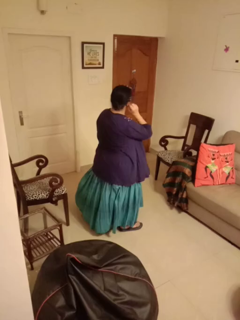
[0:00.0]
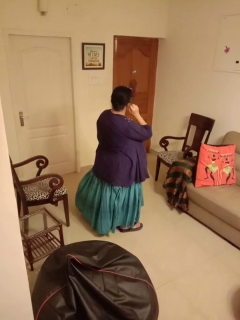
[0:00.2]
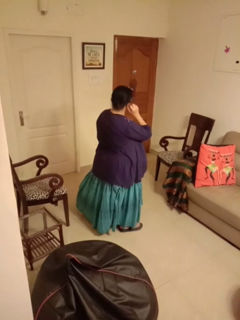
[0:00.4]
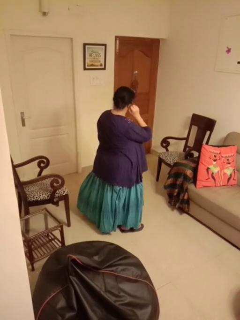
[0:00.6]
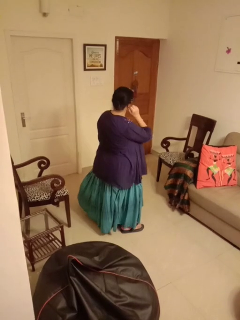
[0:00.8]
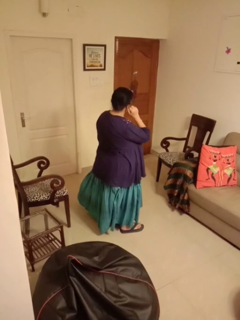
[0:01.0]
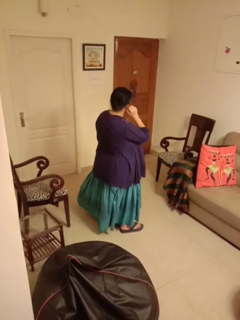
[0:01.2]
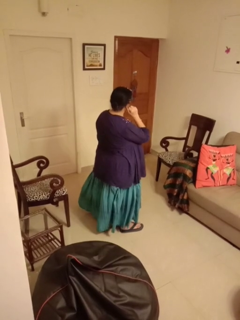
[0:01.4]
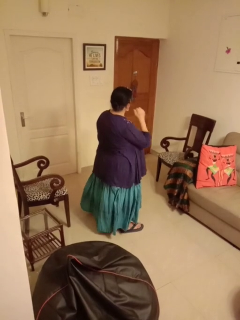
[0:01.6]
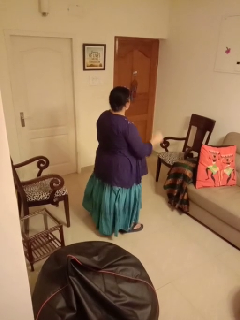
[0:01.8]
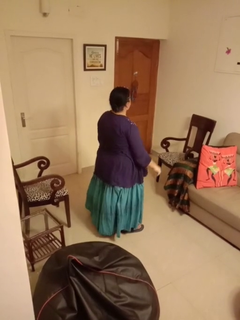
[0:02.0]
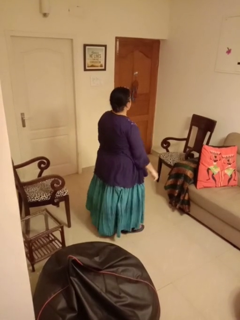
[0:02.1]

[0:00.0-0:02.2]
person touches earlobe

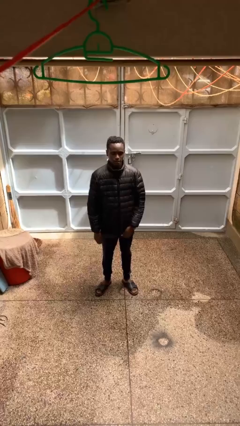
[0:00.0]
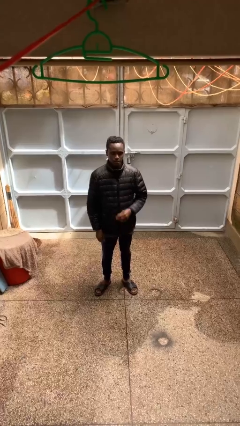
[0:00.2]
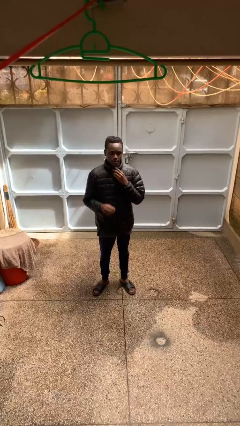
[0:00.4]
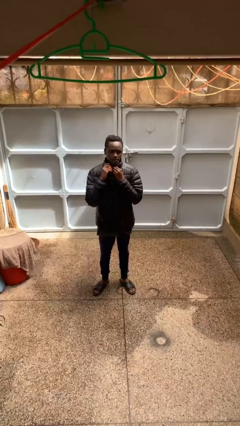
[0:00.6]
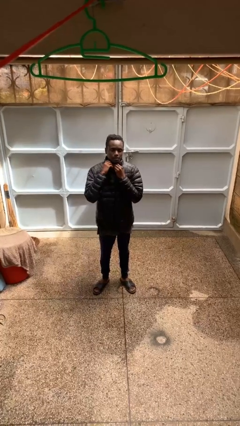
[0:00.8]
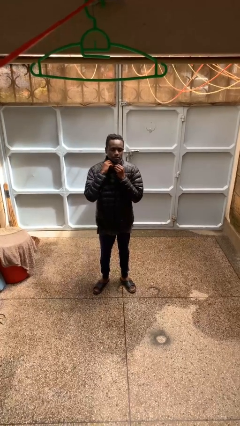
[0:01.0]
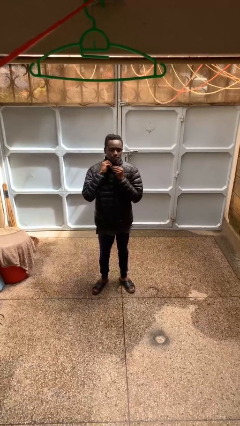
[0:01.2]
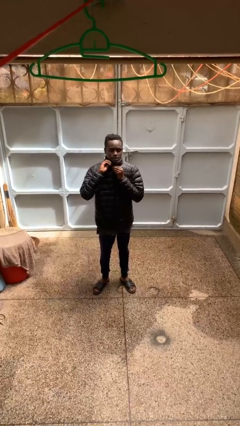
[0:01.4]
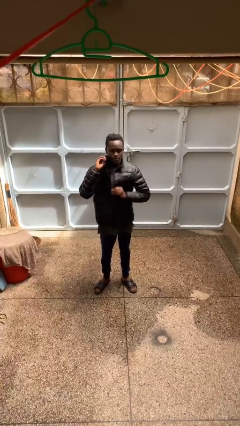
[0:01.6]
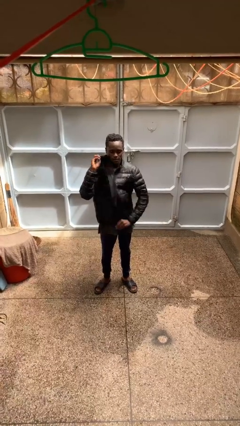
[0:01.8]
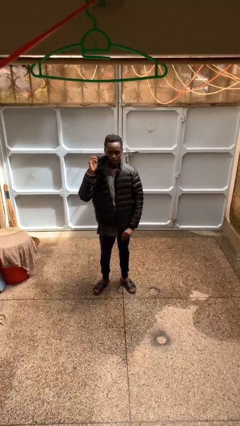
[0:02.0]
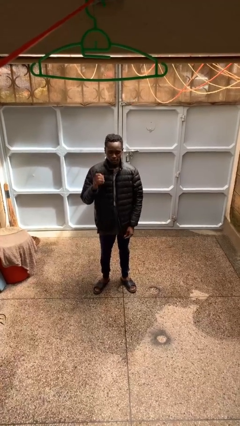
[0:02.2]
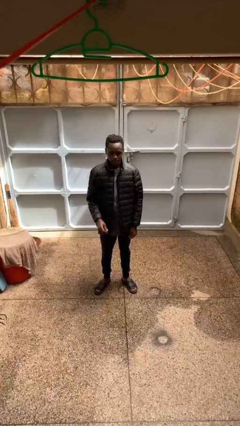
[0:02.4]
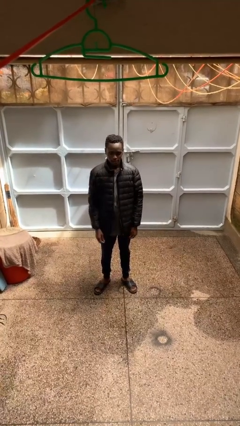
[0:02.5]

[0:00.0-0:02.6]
person unzips jacket

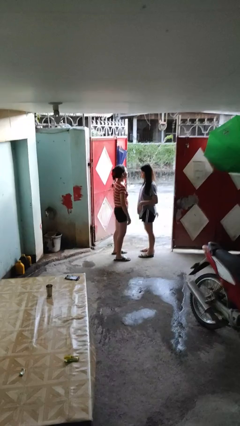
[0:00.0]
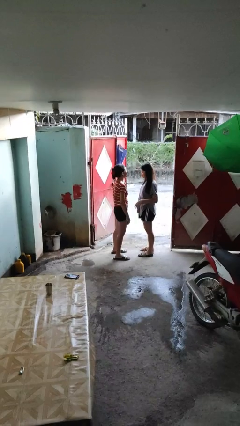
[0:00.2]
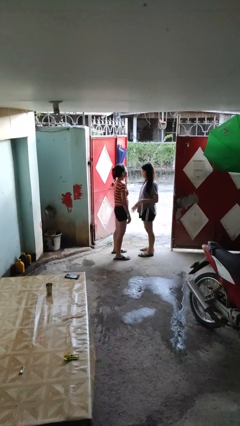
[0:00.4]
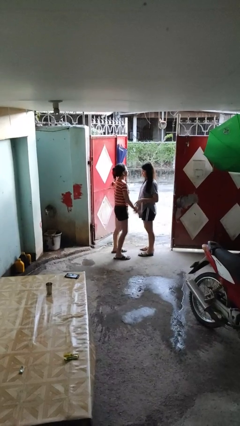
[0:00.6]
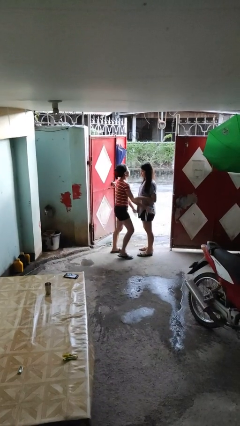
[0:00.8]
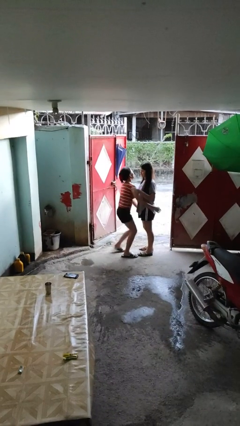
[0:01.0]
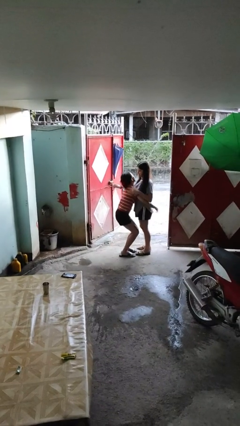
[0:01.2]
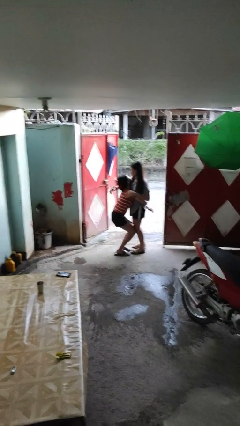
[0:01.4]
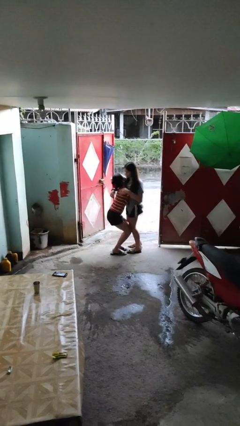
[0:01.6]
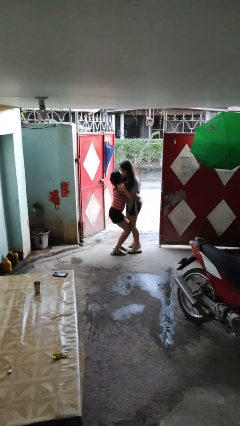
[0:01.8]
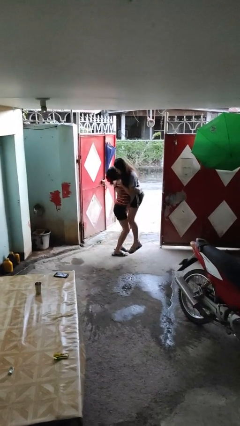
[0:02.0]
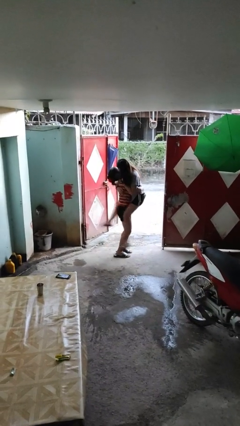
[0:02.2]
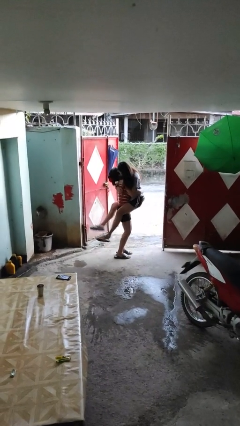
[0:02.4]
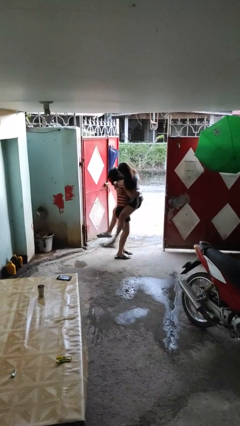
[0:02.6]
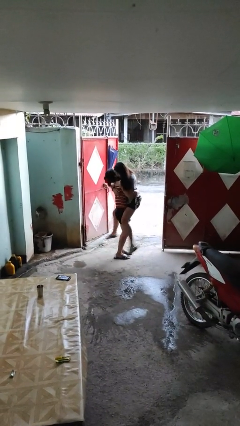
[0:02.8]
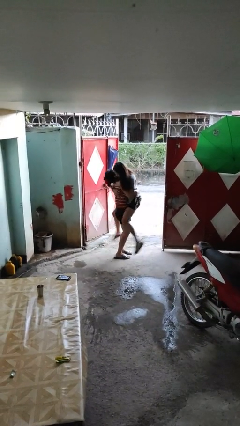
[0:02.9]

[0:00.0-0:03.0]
person picks up person

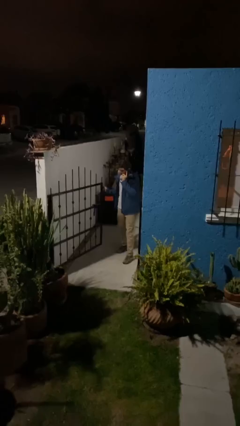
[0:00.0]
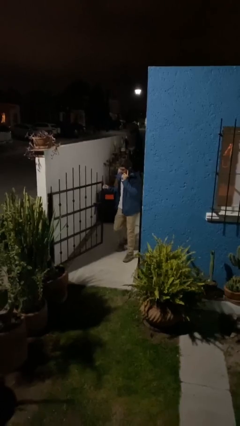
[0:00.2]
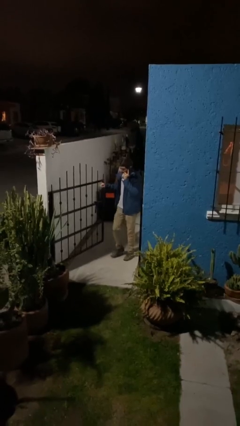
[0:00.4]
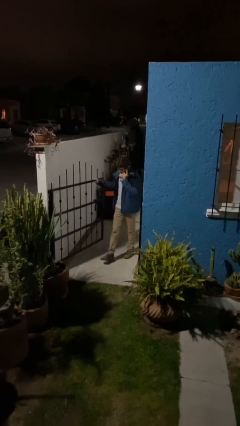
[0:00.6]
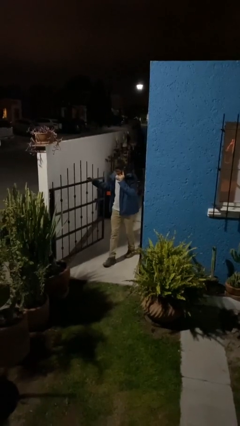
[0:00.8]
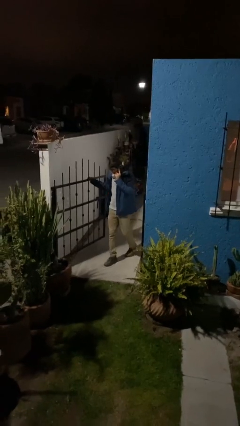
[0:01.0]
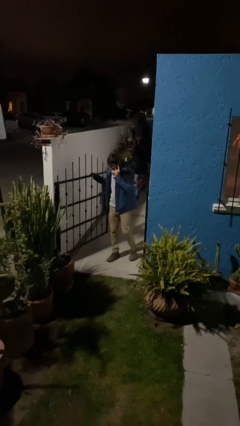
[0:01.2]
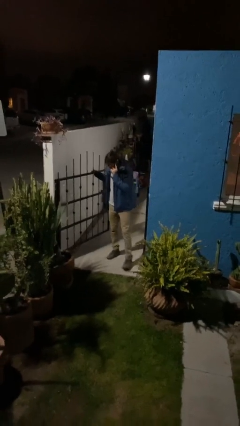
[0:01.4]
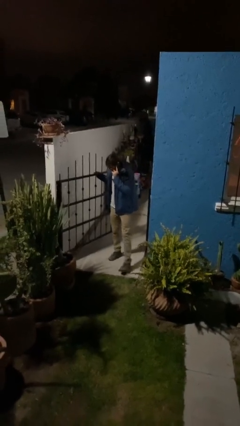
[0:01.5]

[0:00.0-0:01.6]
person enters scene through structure

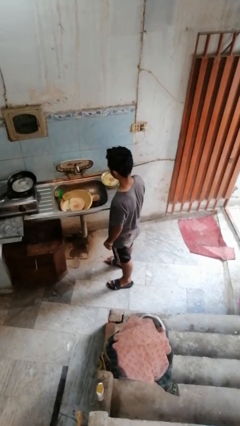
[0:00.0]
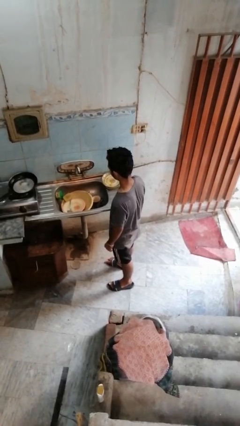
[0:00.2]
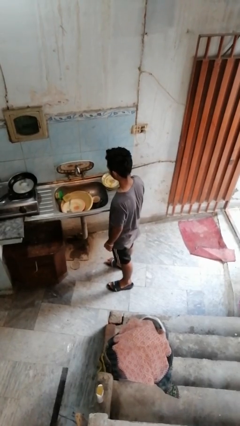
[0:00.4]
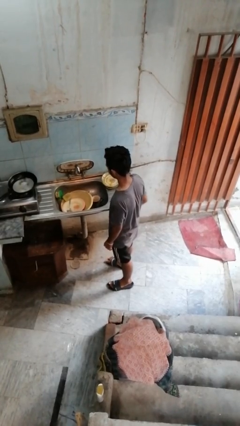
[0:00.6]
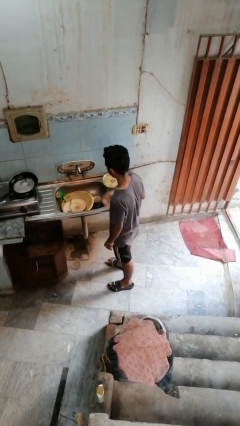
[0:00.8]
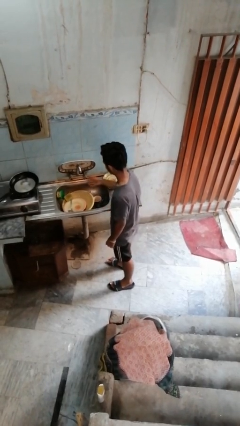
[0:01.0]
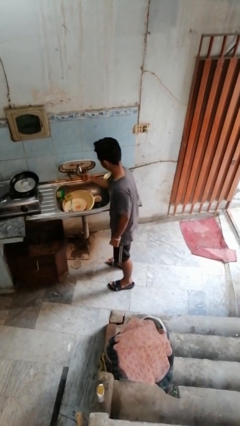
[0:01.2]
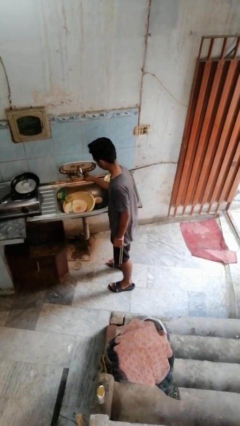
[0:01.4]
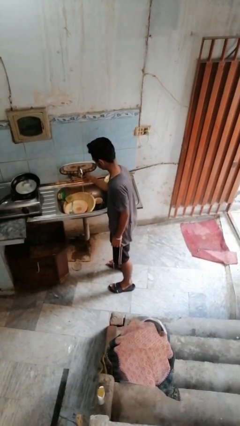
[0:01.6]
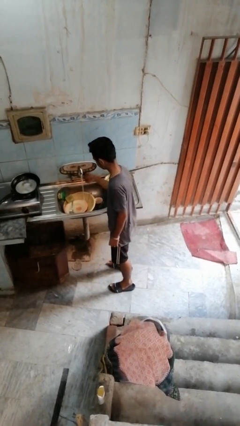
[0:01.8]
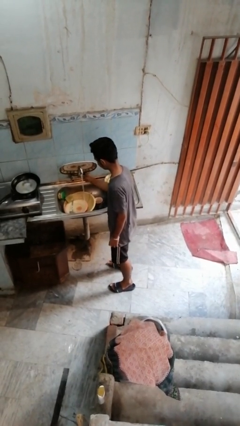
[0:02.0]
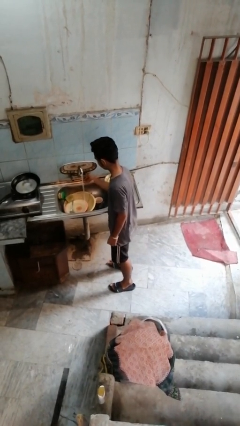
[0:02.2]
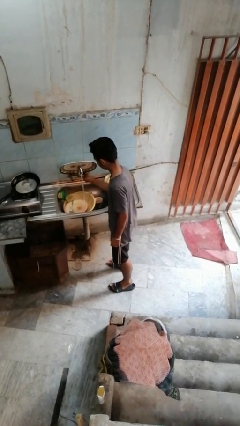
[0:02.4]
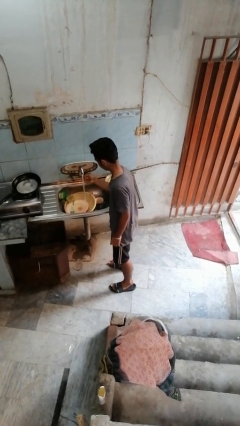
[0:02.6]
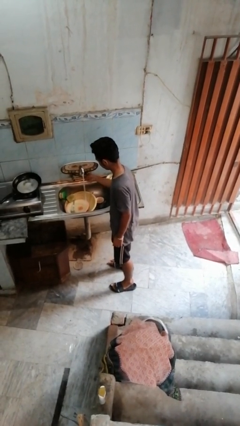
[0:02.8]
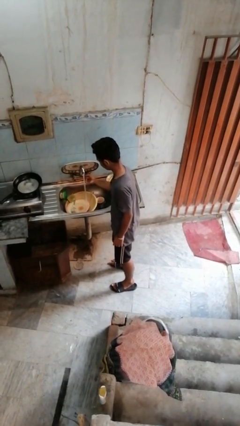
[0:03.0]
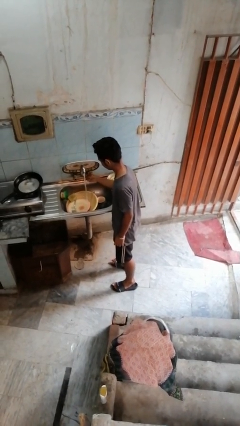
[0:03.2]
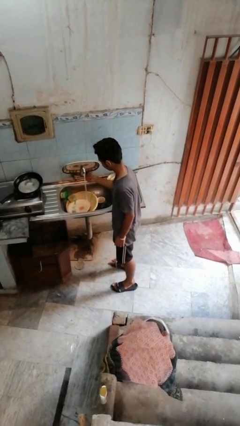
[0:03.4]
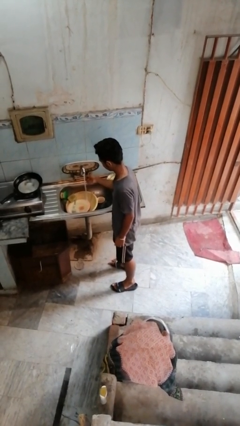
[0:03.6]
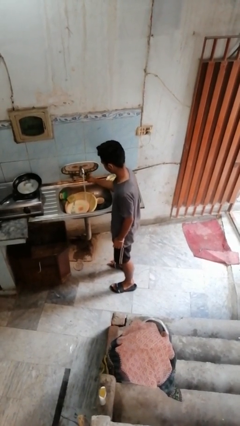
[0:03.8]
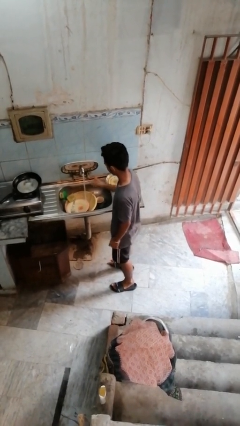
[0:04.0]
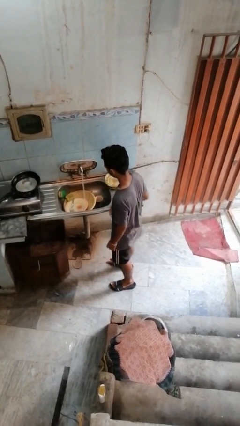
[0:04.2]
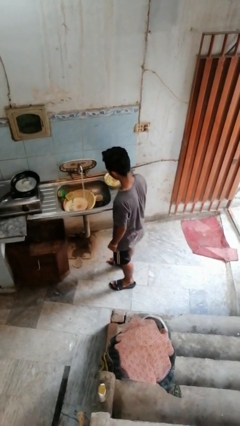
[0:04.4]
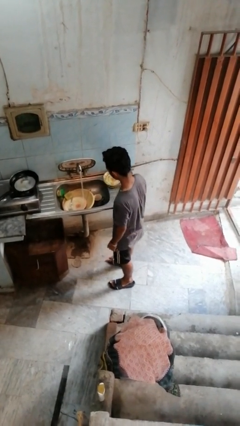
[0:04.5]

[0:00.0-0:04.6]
person turns on faucet

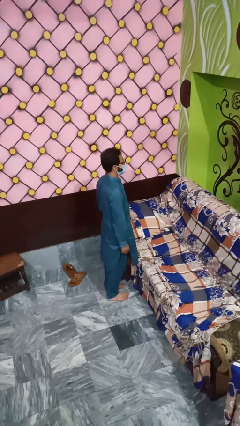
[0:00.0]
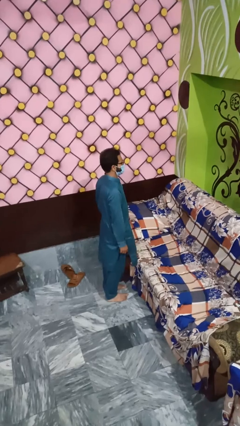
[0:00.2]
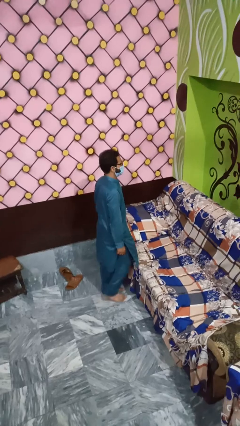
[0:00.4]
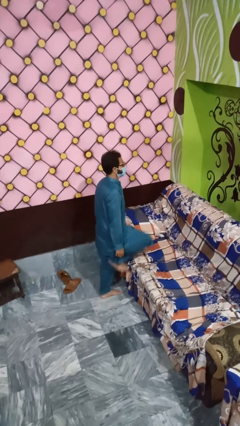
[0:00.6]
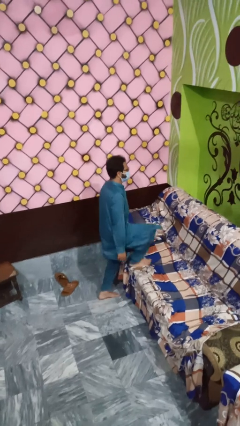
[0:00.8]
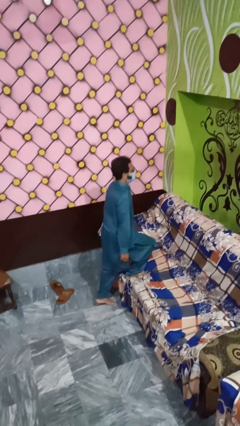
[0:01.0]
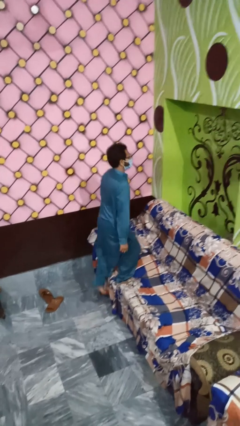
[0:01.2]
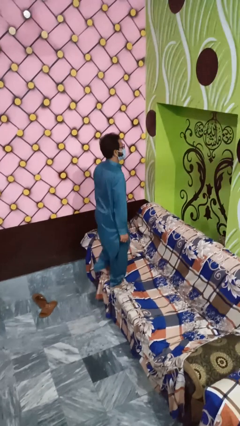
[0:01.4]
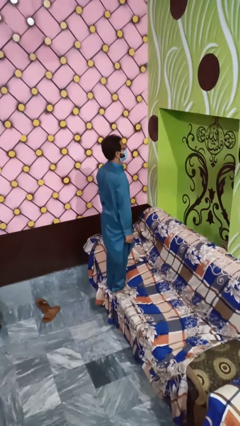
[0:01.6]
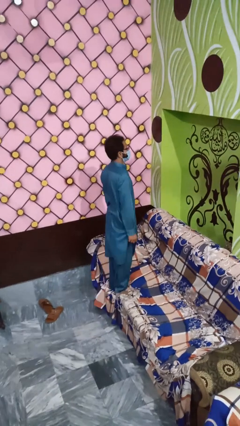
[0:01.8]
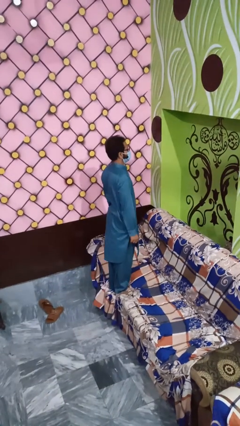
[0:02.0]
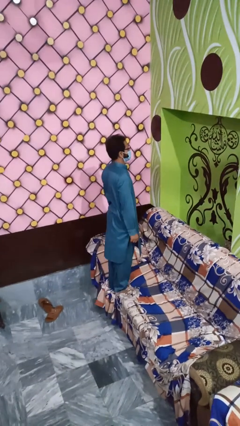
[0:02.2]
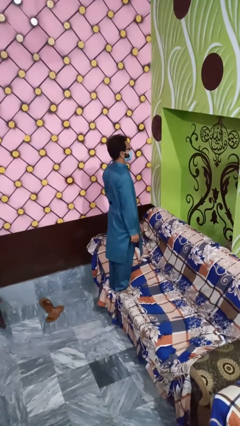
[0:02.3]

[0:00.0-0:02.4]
person climbs on couch

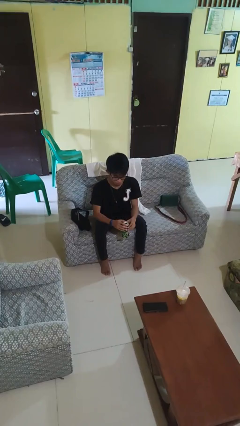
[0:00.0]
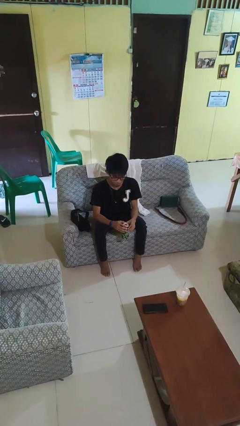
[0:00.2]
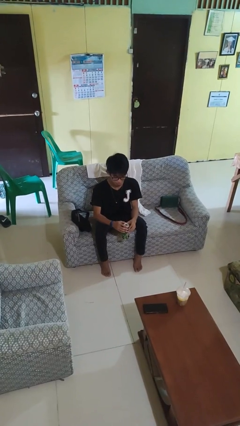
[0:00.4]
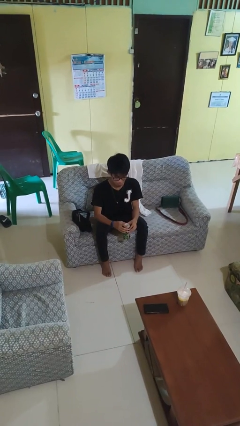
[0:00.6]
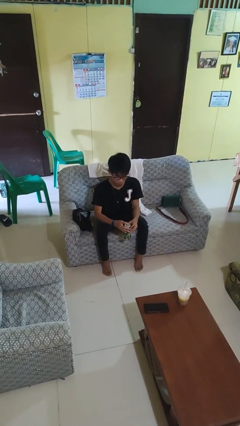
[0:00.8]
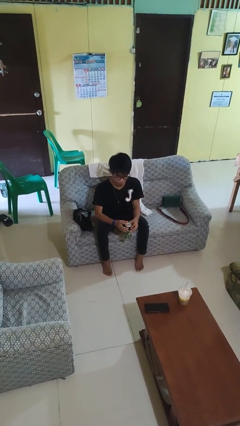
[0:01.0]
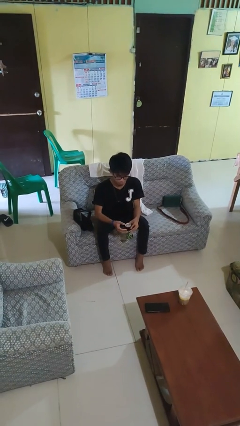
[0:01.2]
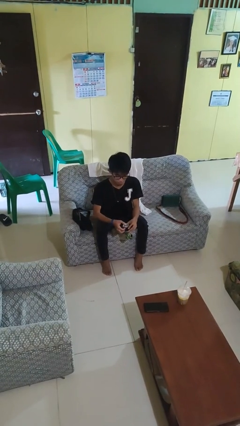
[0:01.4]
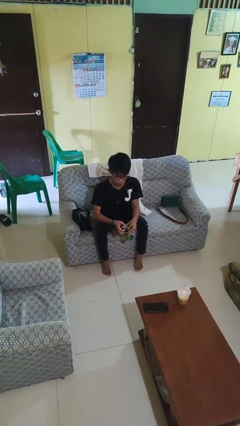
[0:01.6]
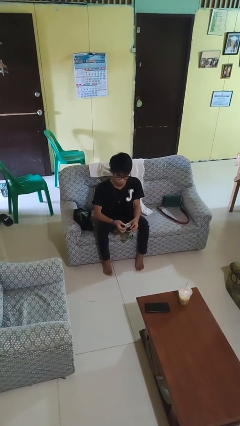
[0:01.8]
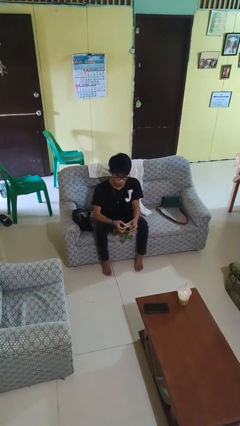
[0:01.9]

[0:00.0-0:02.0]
person opens beverage can
